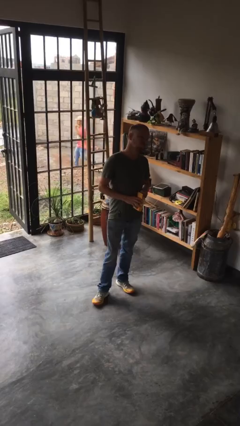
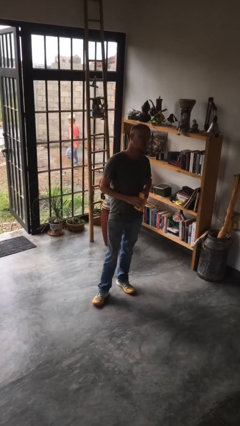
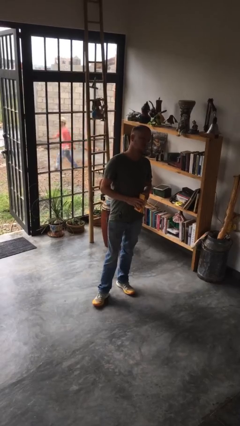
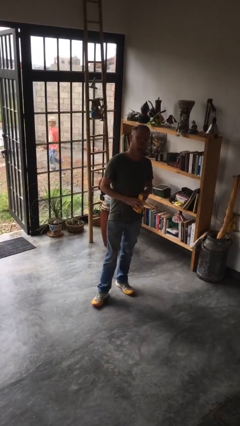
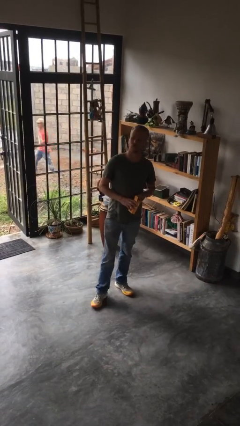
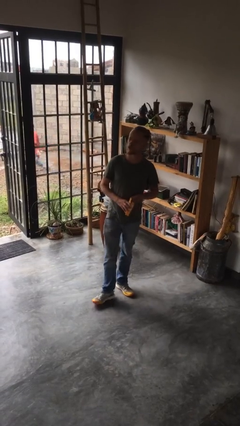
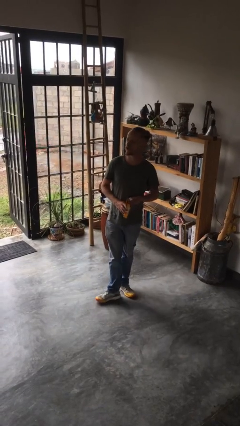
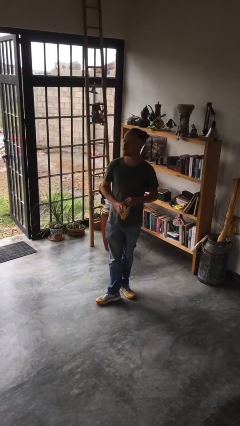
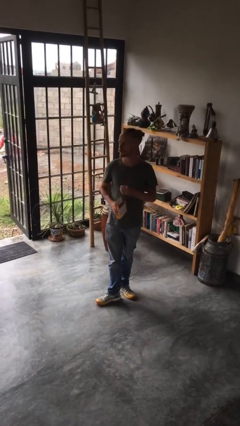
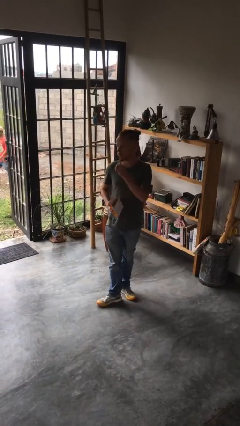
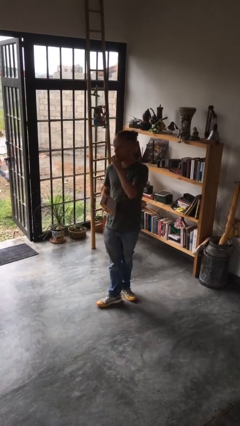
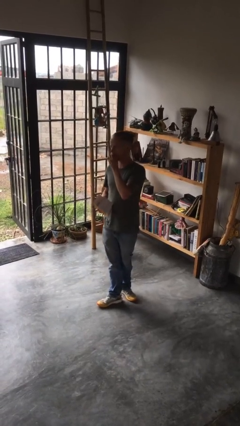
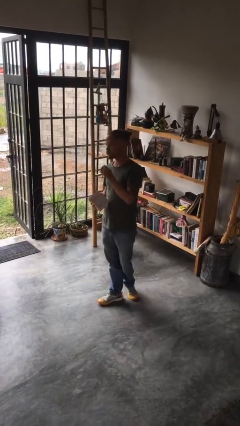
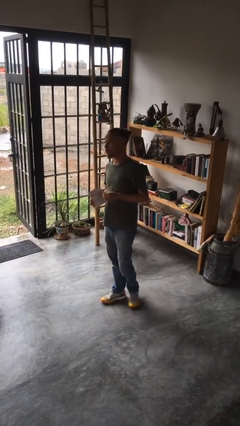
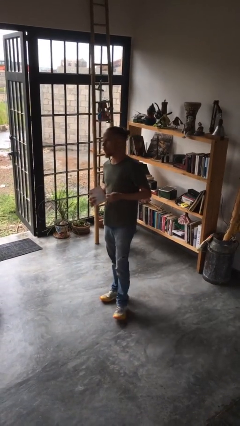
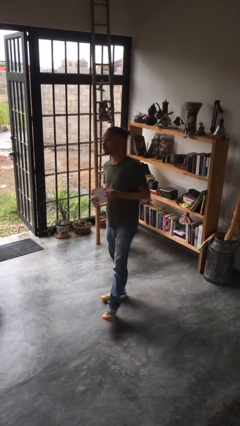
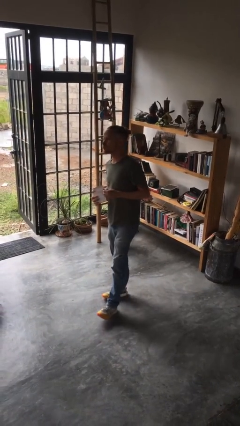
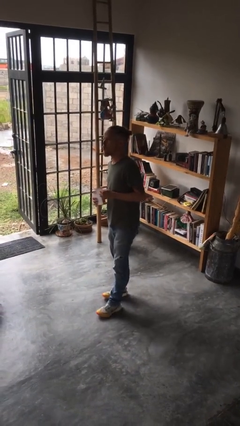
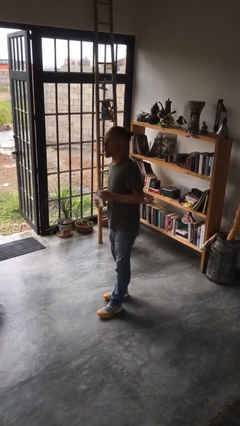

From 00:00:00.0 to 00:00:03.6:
person eats snack from bag

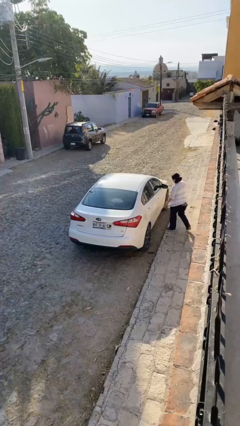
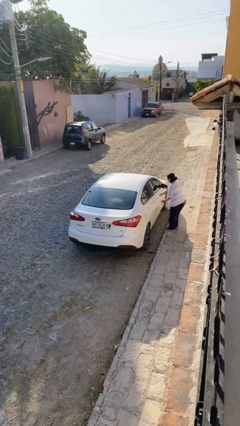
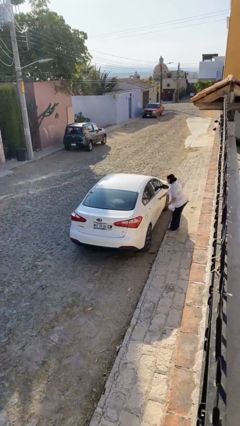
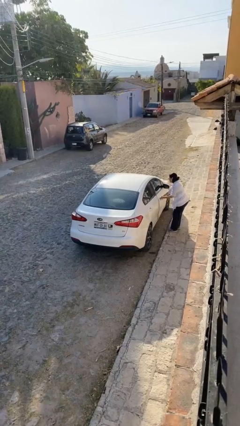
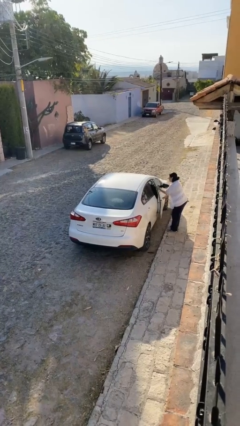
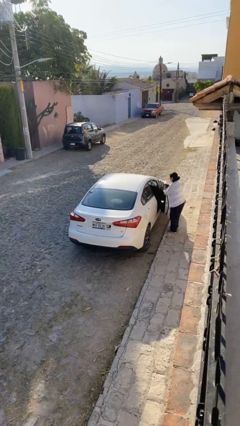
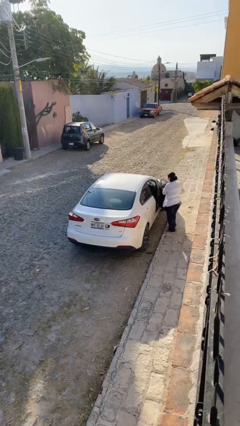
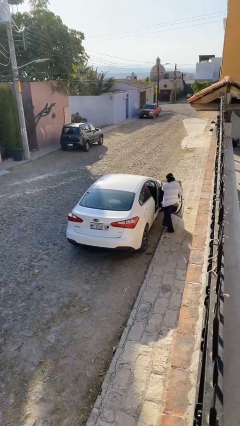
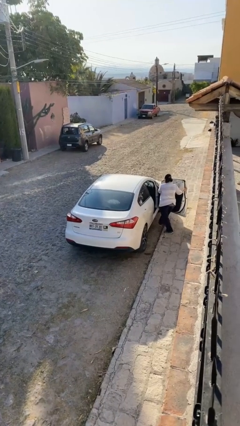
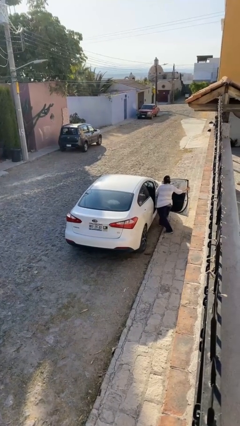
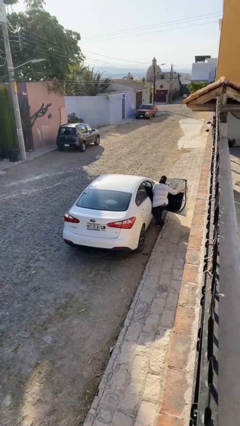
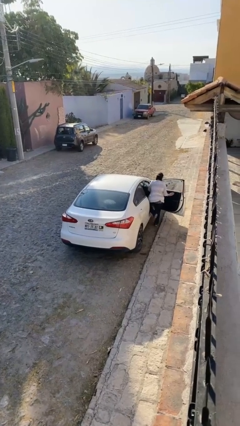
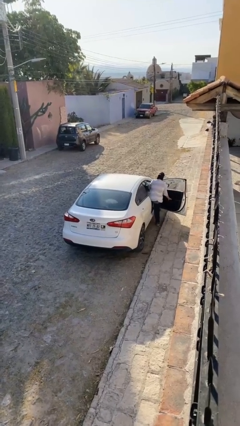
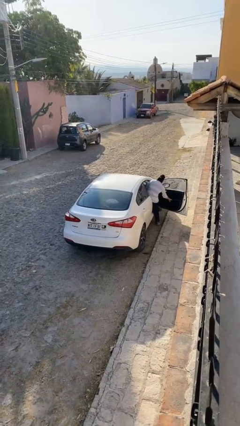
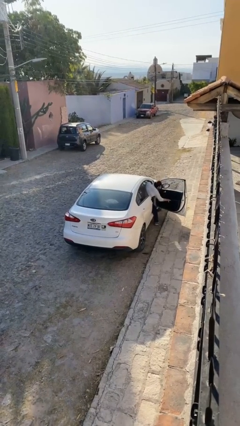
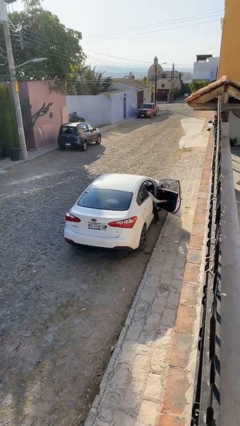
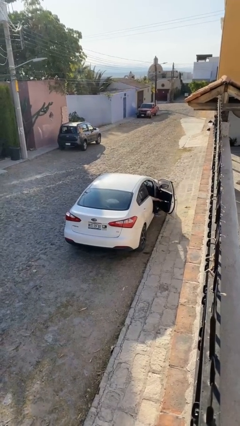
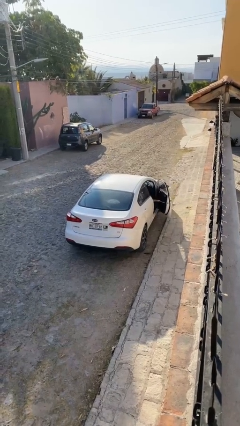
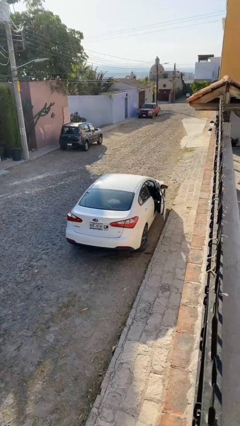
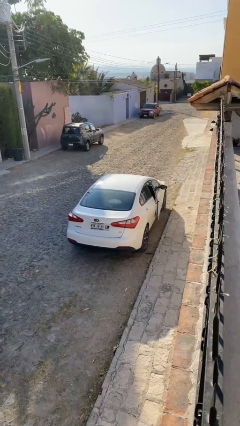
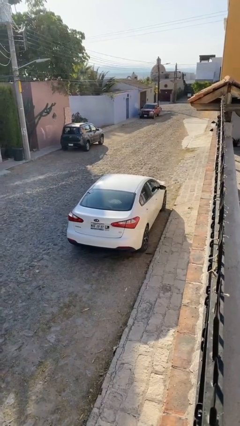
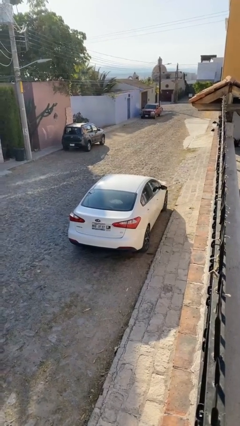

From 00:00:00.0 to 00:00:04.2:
car picks up person

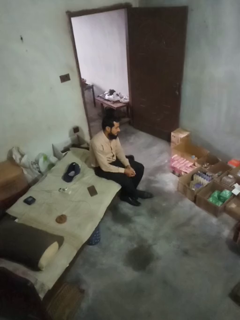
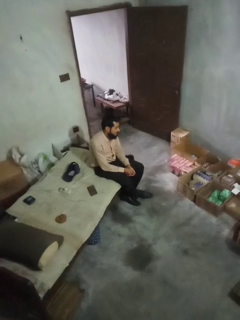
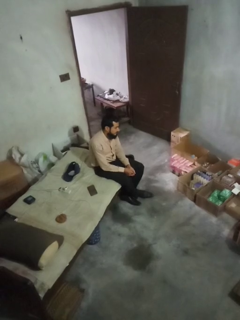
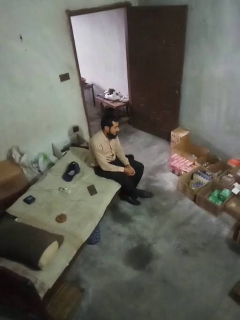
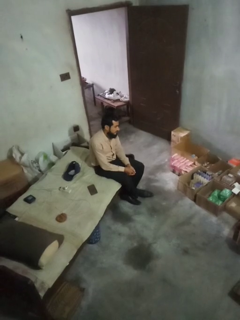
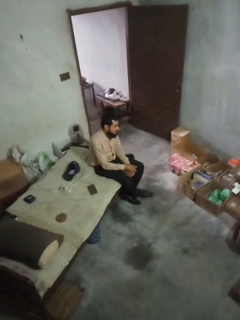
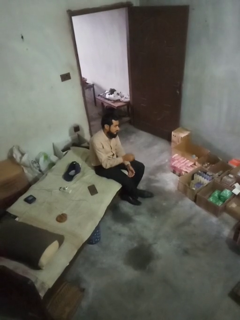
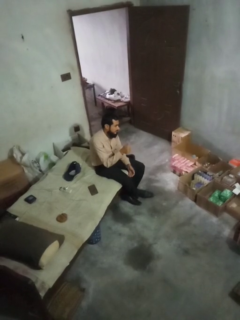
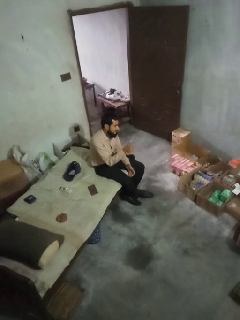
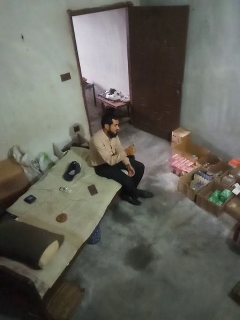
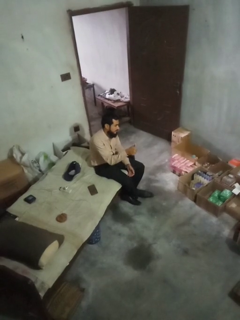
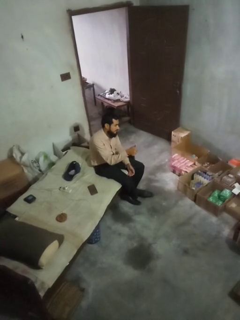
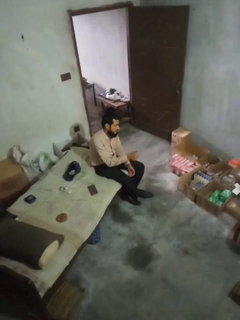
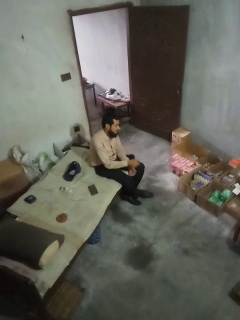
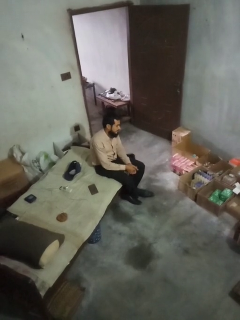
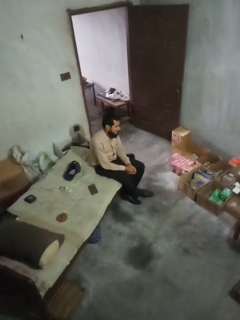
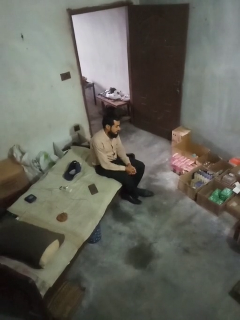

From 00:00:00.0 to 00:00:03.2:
person gestures thumbs up

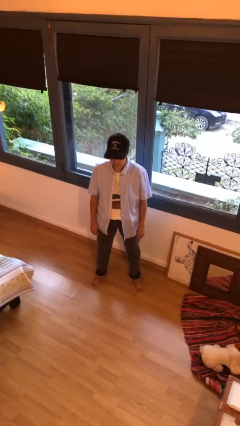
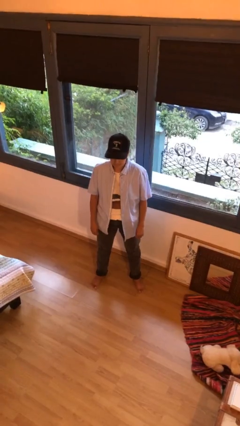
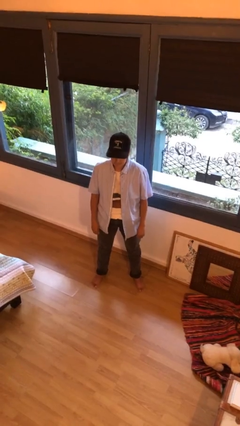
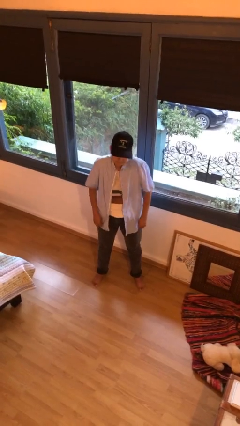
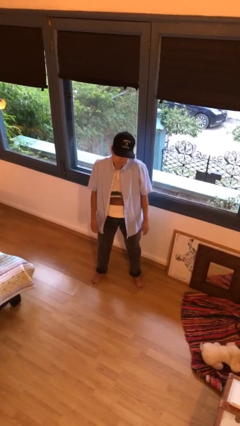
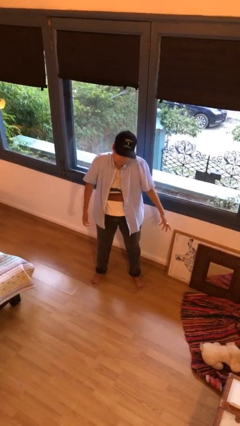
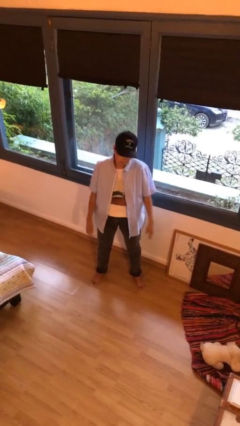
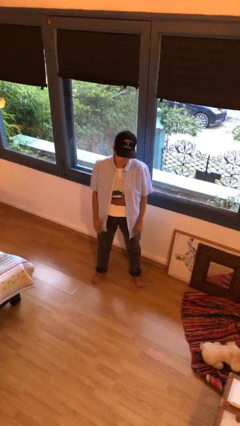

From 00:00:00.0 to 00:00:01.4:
person shrugs

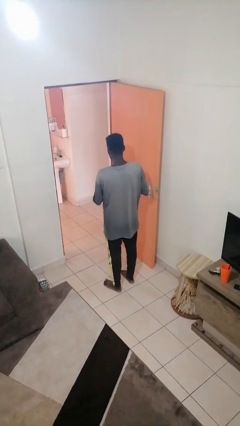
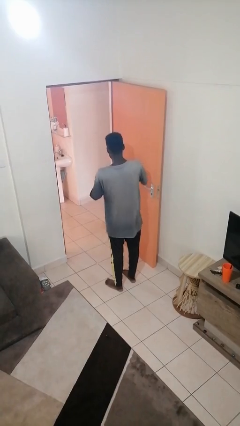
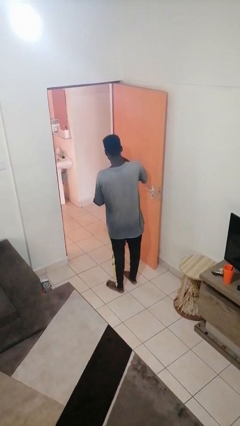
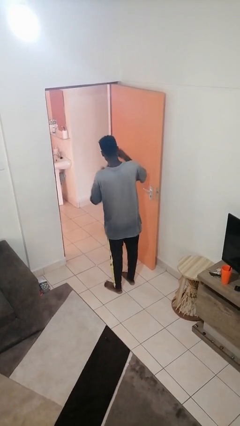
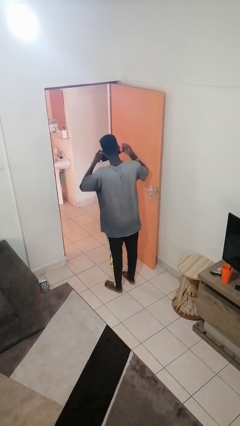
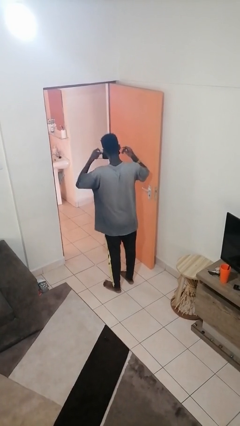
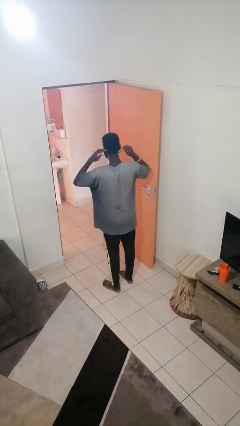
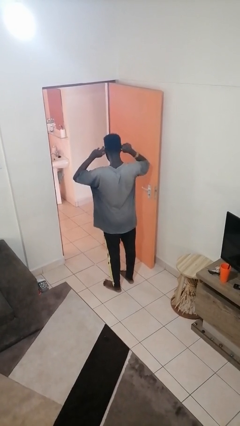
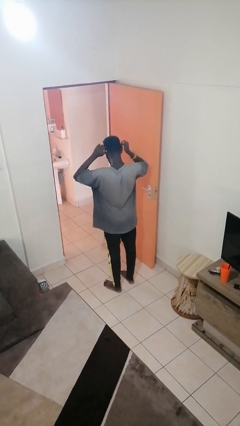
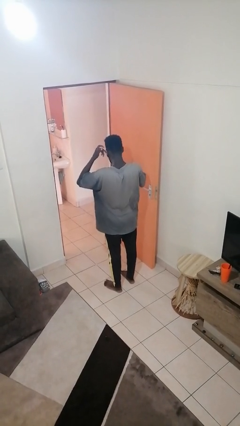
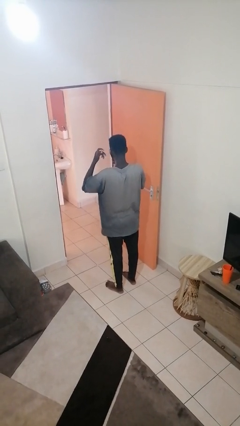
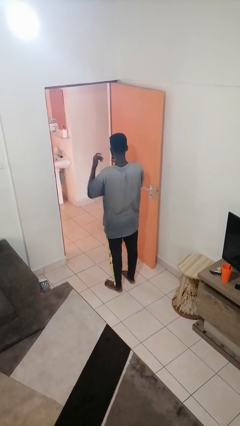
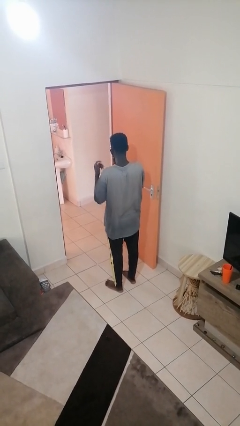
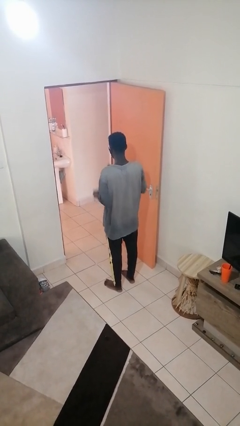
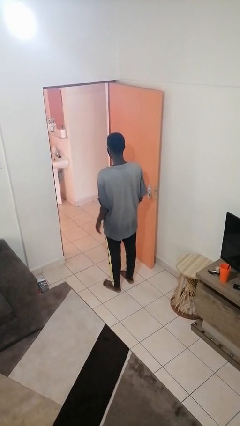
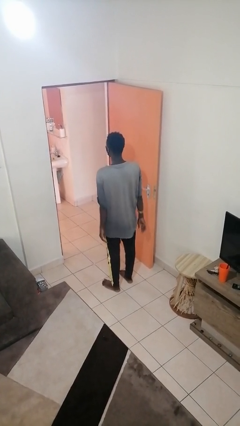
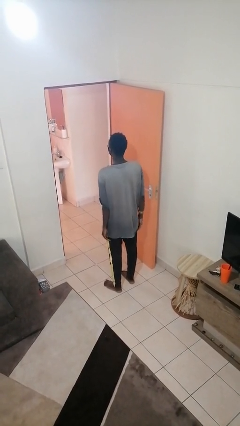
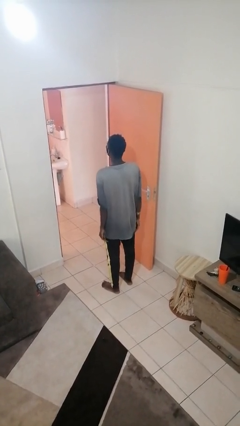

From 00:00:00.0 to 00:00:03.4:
person puts on facemask

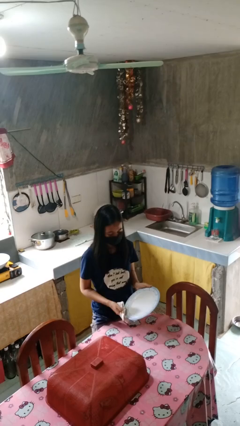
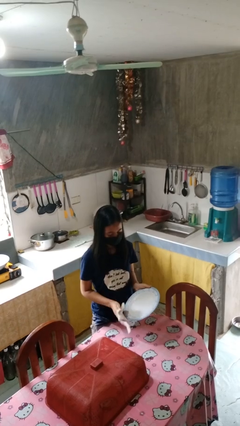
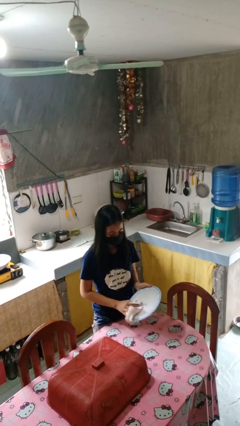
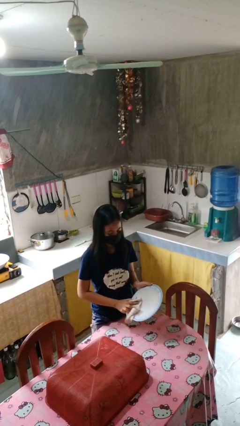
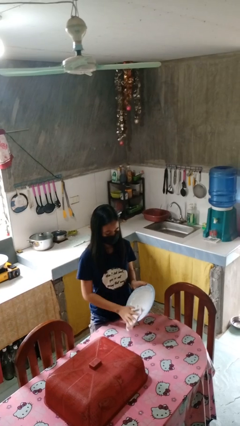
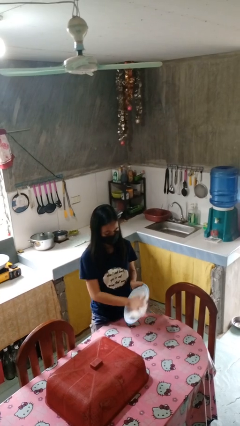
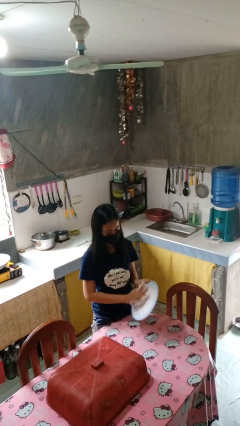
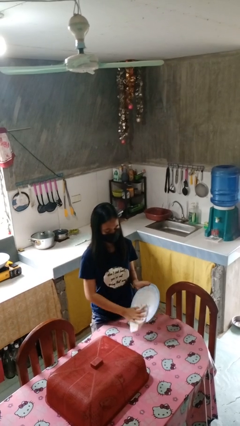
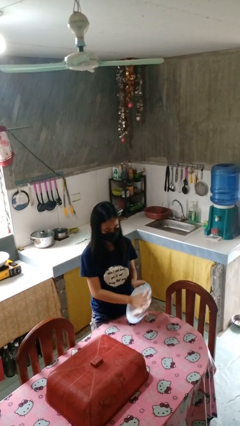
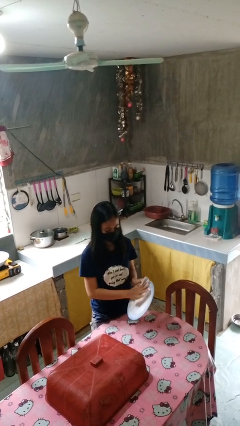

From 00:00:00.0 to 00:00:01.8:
person dries dish

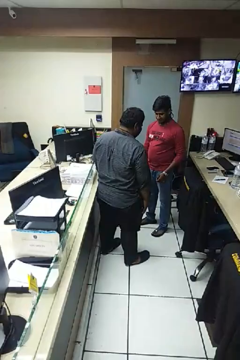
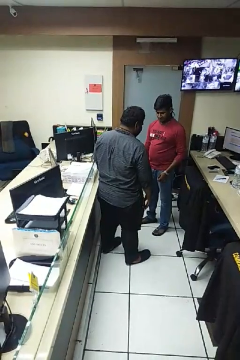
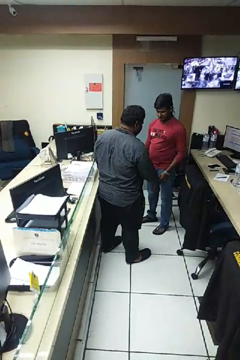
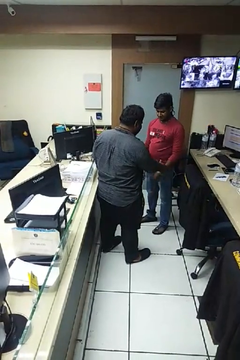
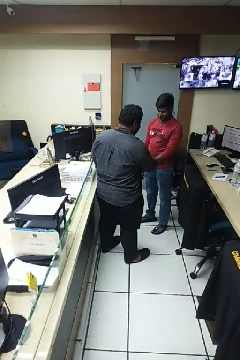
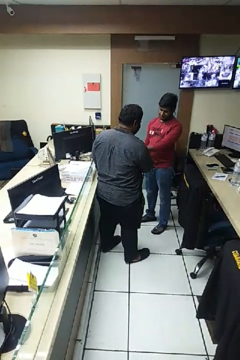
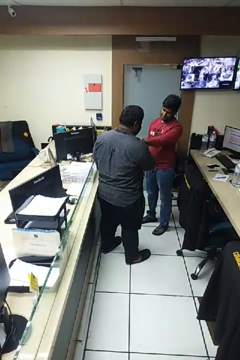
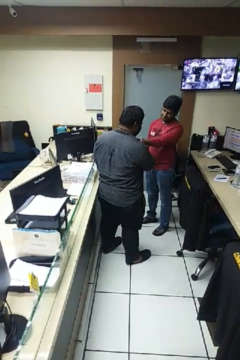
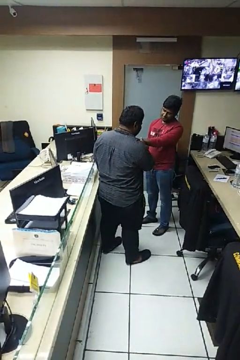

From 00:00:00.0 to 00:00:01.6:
person grabs person by forearm
